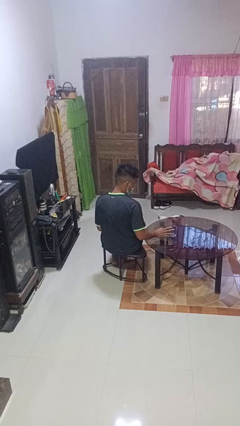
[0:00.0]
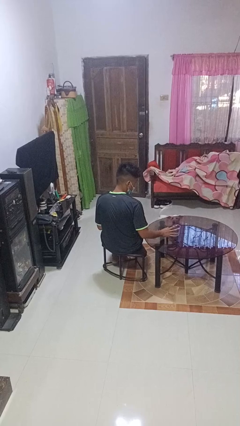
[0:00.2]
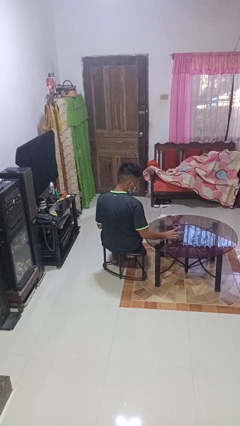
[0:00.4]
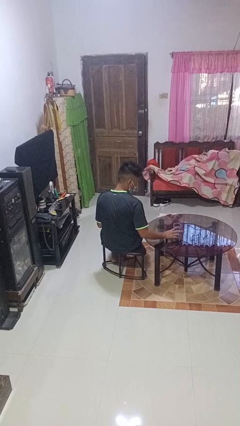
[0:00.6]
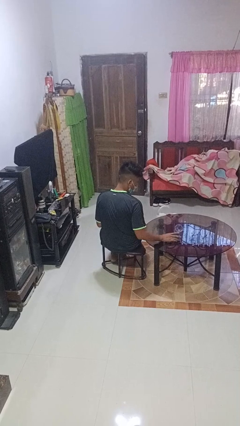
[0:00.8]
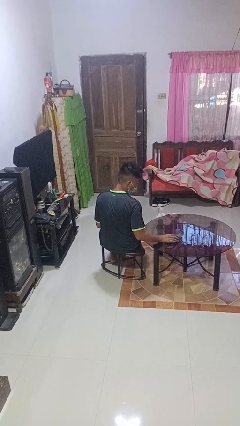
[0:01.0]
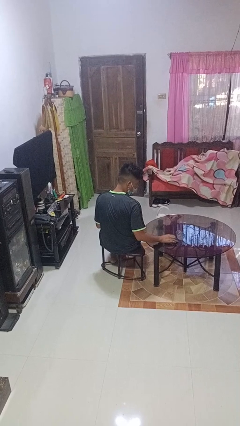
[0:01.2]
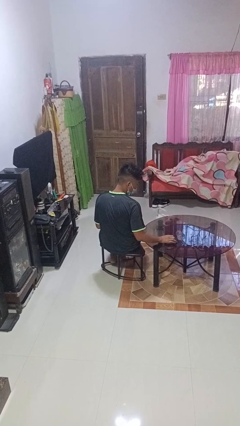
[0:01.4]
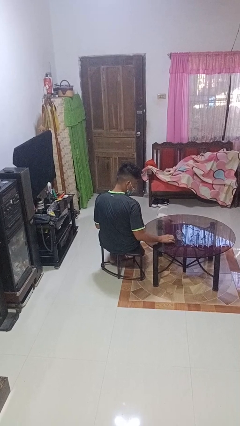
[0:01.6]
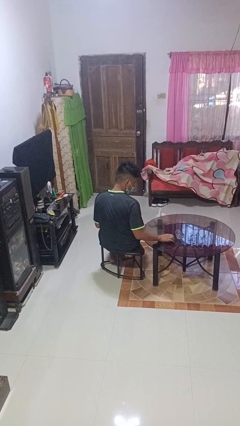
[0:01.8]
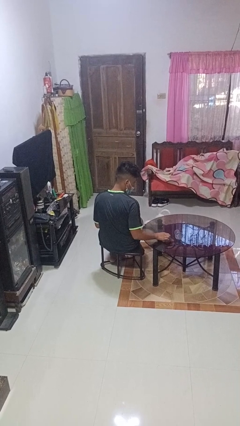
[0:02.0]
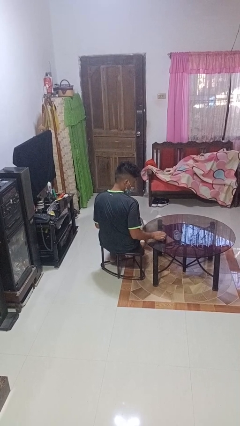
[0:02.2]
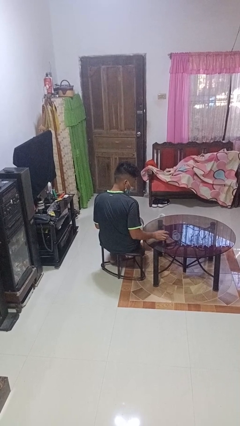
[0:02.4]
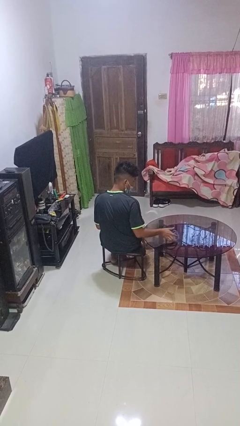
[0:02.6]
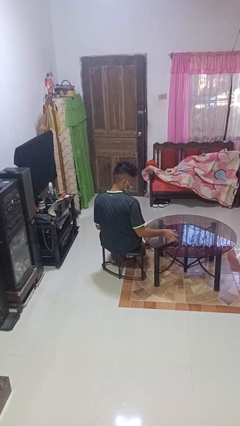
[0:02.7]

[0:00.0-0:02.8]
person knocks over glass

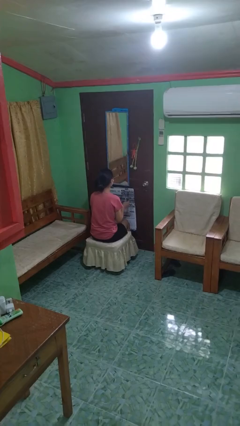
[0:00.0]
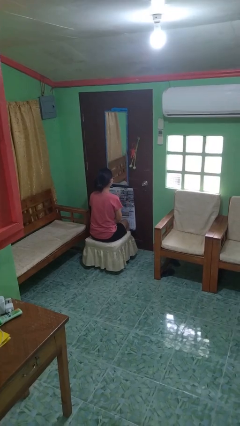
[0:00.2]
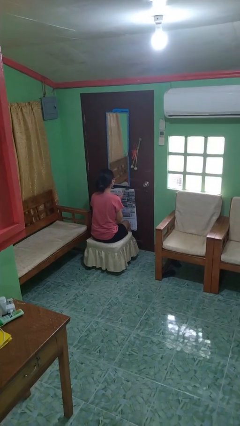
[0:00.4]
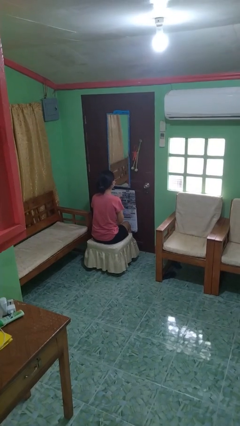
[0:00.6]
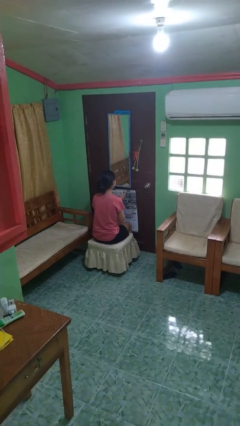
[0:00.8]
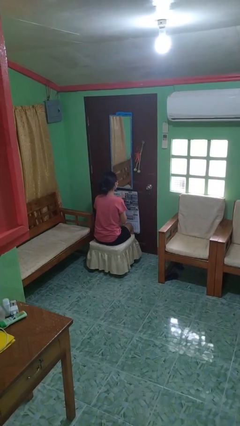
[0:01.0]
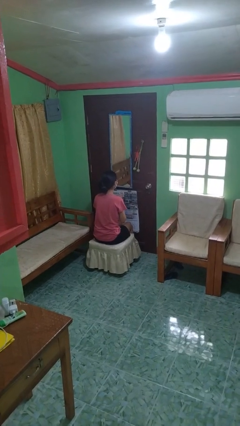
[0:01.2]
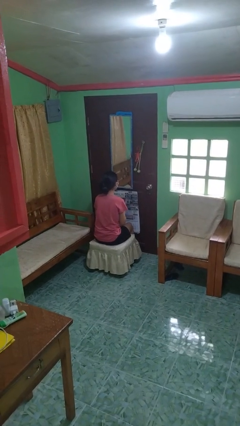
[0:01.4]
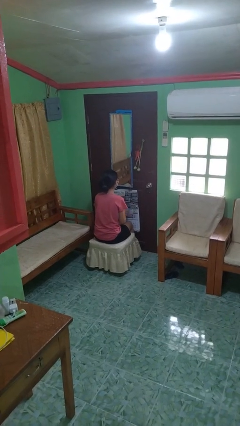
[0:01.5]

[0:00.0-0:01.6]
person claps hands

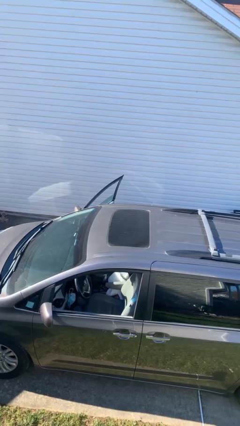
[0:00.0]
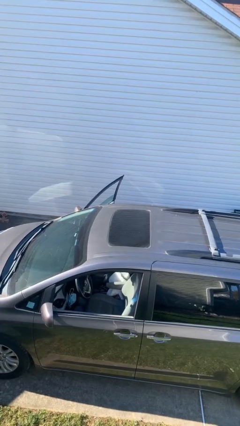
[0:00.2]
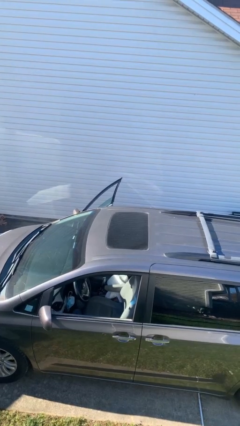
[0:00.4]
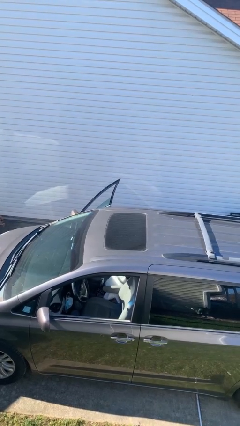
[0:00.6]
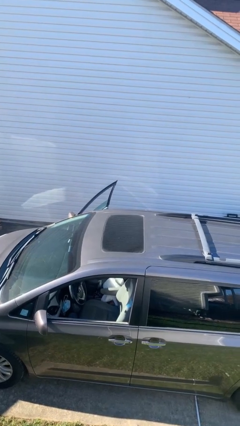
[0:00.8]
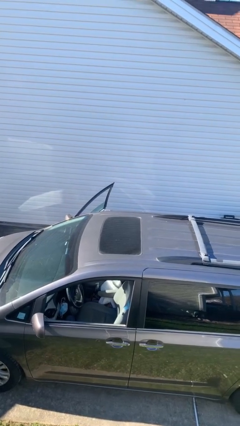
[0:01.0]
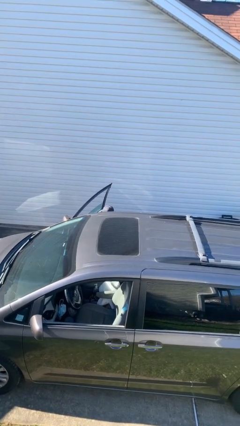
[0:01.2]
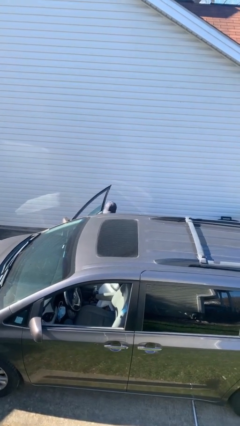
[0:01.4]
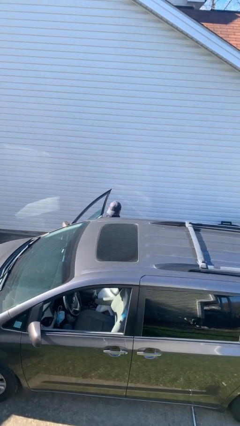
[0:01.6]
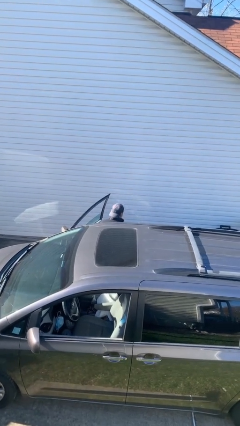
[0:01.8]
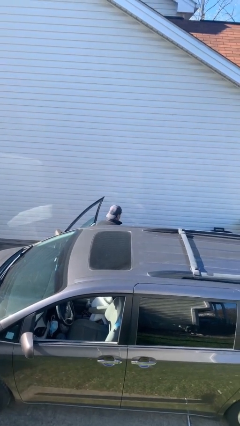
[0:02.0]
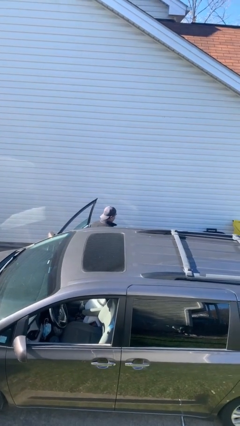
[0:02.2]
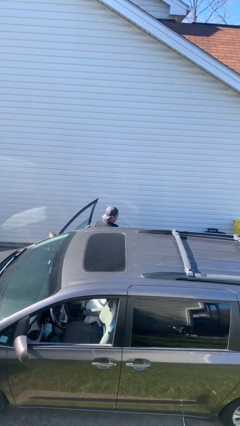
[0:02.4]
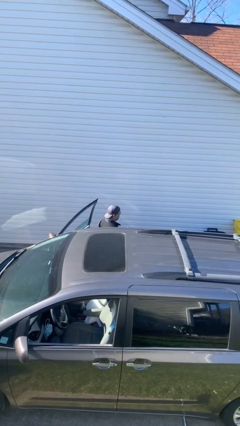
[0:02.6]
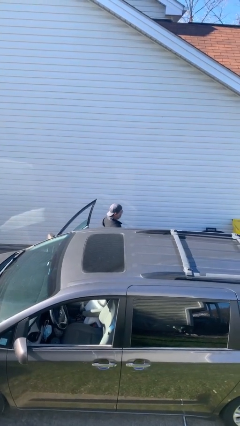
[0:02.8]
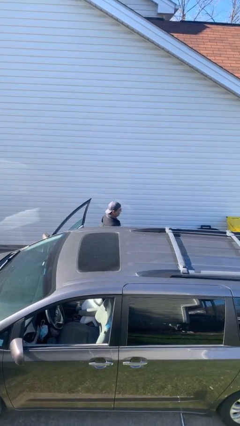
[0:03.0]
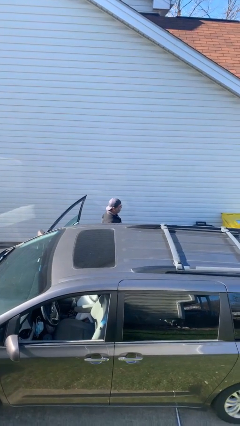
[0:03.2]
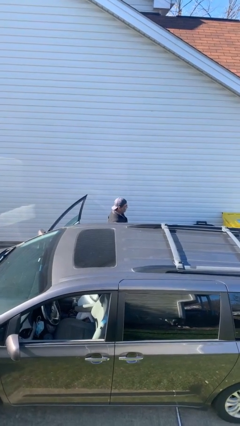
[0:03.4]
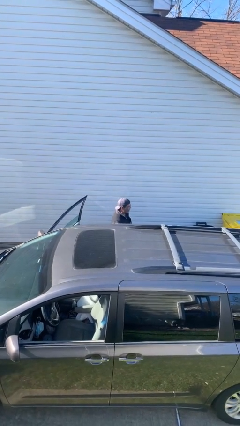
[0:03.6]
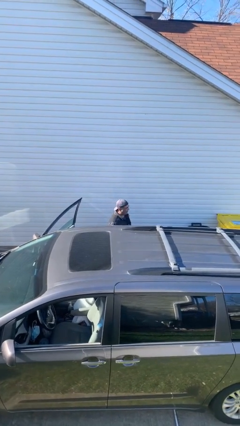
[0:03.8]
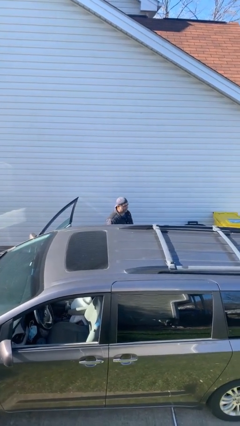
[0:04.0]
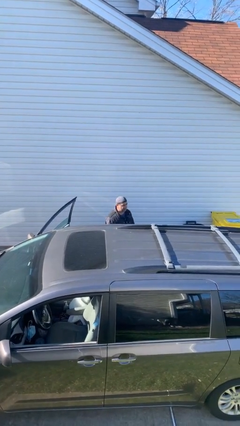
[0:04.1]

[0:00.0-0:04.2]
person exits car

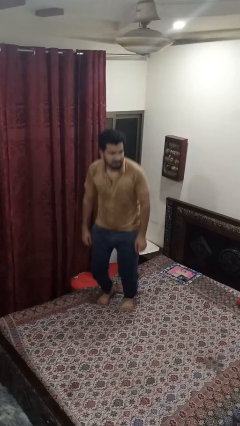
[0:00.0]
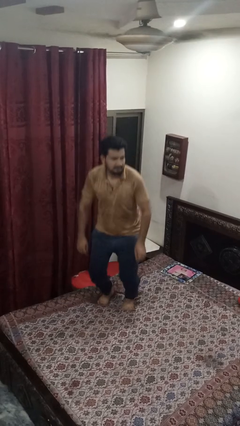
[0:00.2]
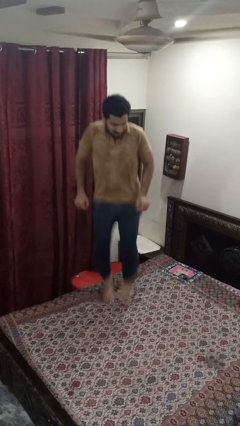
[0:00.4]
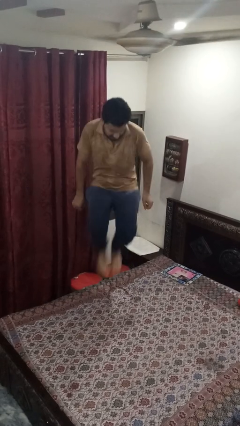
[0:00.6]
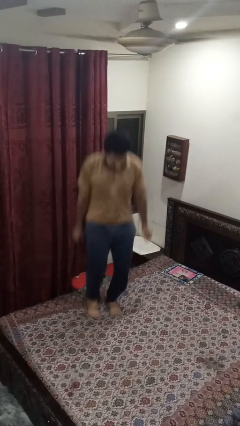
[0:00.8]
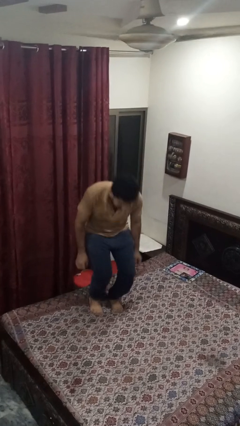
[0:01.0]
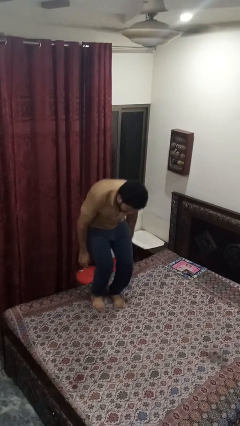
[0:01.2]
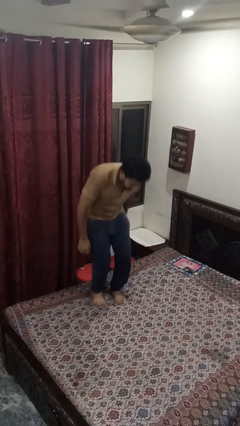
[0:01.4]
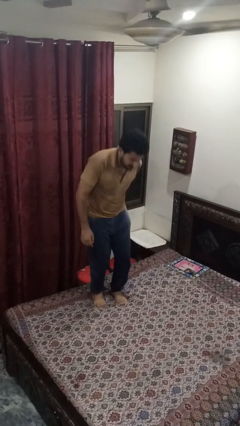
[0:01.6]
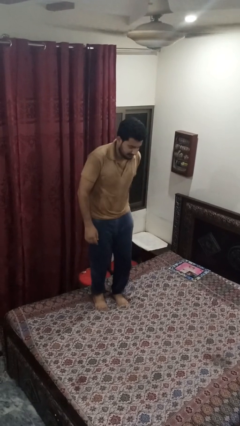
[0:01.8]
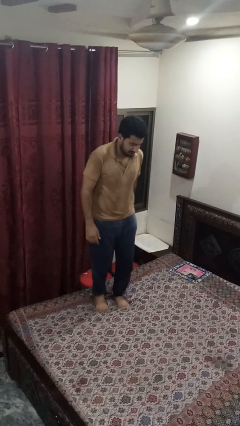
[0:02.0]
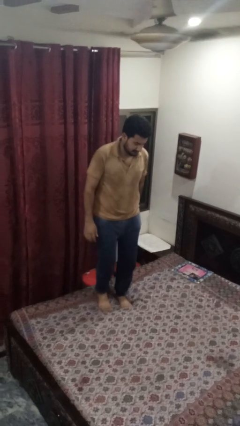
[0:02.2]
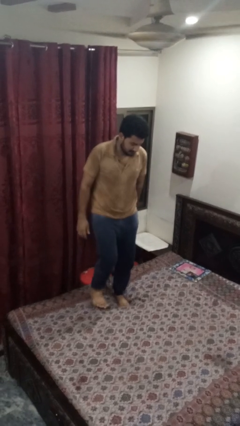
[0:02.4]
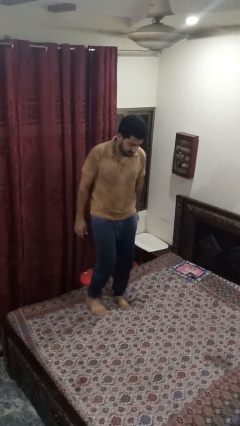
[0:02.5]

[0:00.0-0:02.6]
person jumps on bed

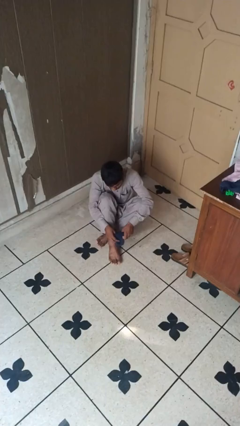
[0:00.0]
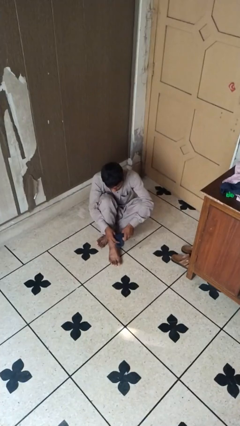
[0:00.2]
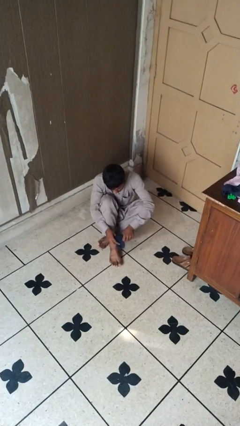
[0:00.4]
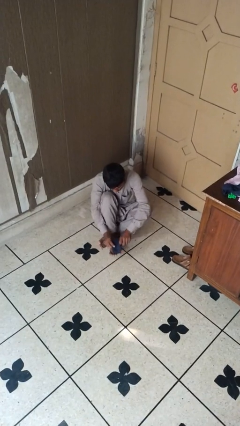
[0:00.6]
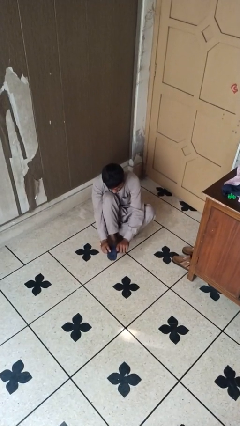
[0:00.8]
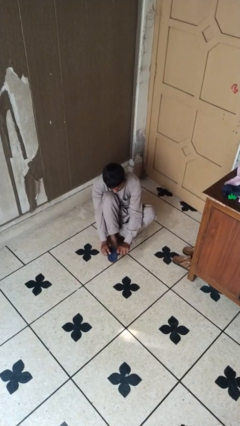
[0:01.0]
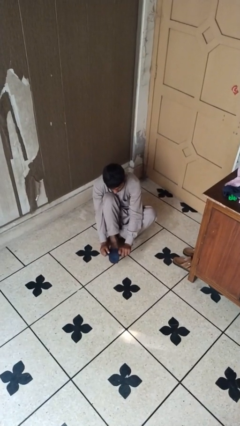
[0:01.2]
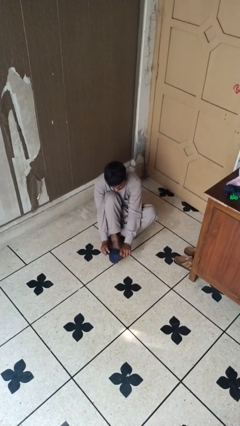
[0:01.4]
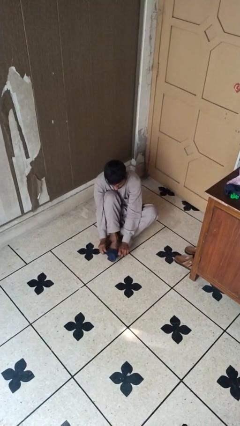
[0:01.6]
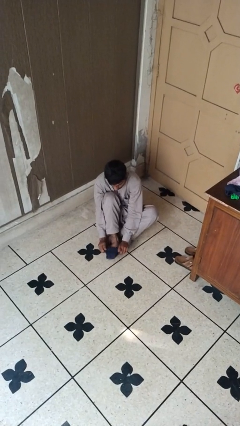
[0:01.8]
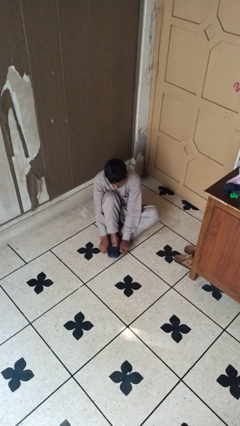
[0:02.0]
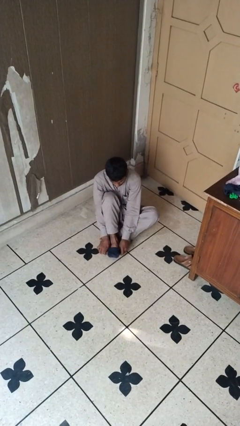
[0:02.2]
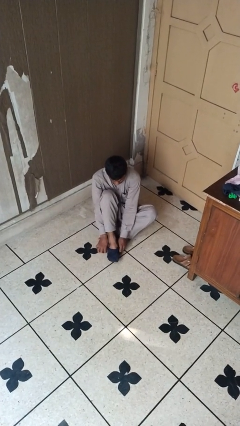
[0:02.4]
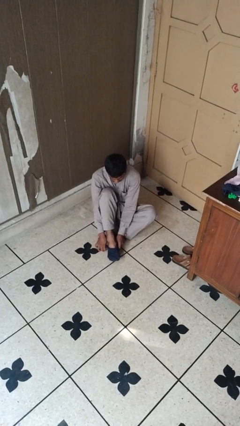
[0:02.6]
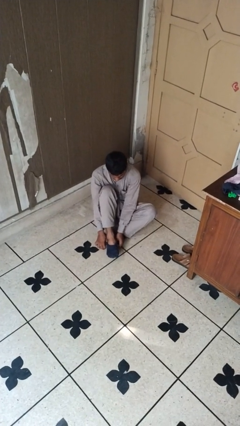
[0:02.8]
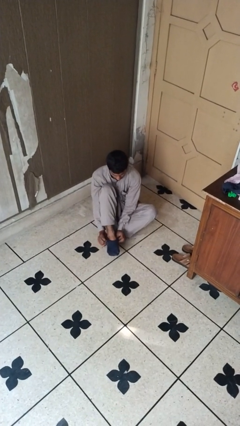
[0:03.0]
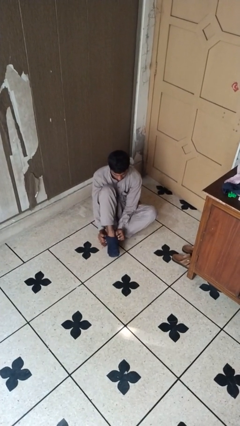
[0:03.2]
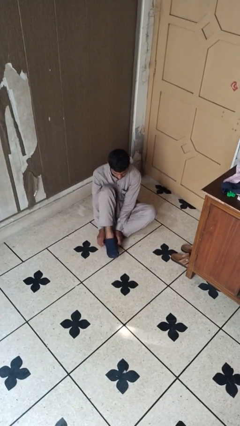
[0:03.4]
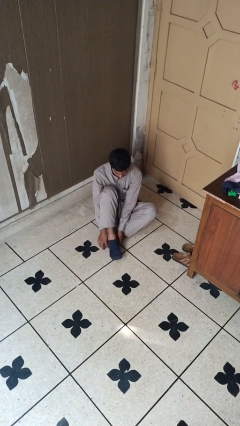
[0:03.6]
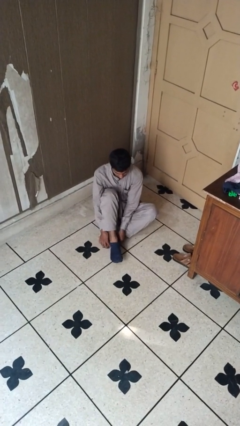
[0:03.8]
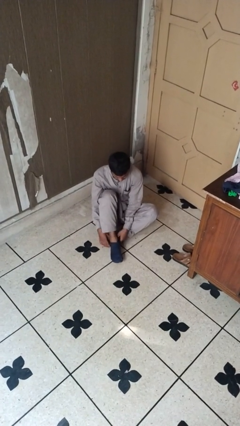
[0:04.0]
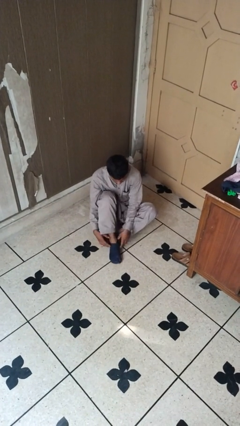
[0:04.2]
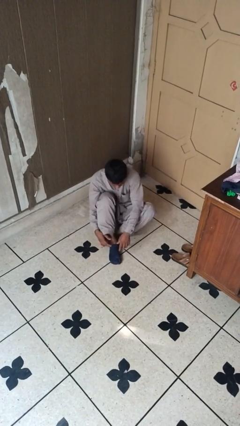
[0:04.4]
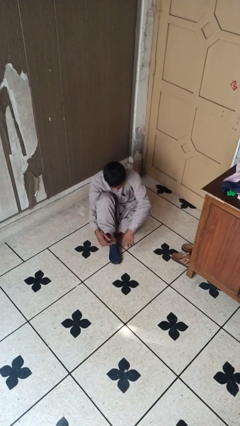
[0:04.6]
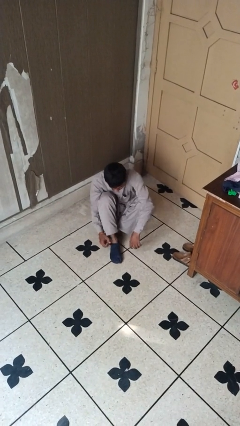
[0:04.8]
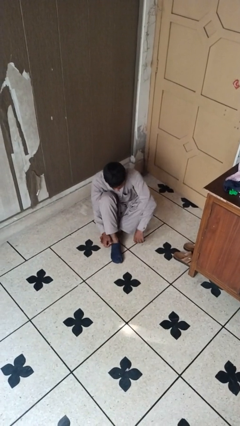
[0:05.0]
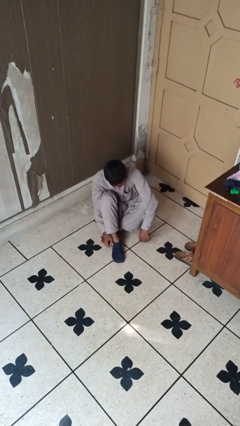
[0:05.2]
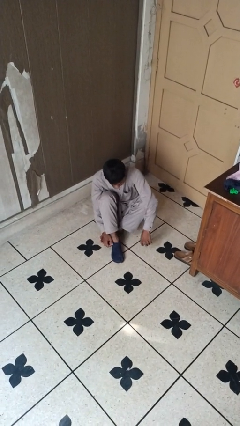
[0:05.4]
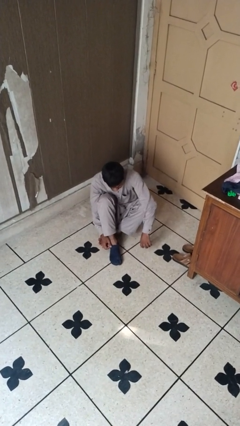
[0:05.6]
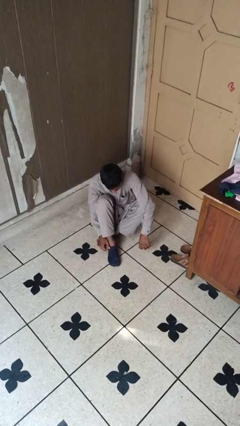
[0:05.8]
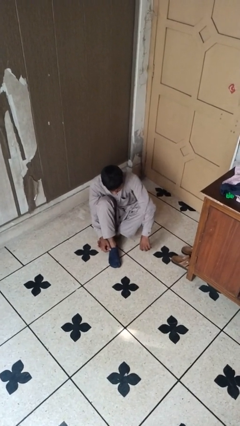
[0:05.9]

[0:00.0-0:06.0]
person puts on socks
